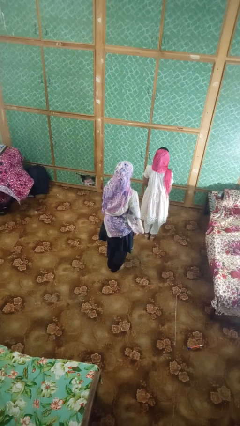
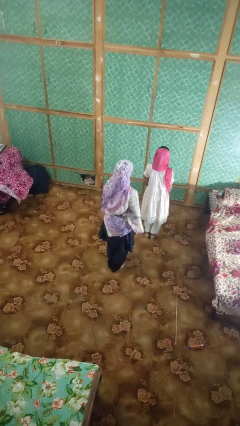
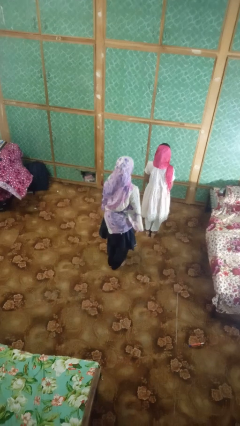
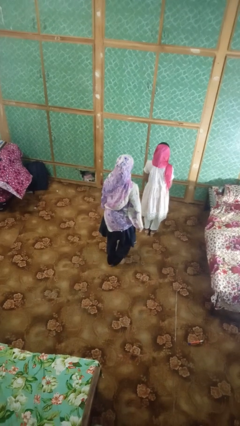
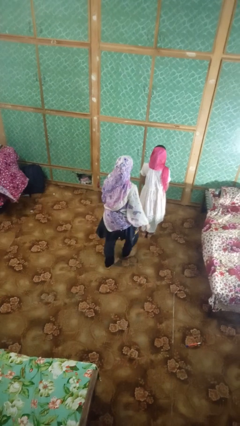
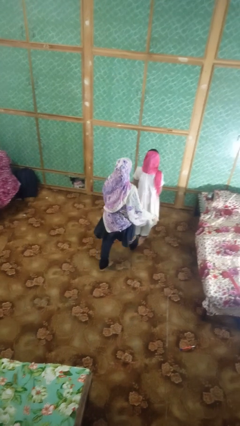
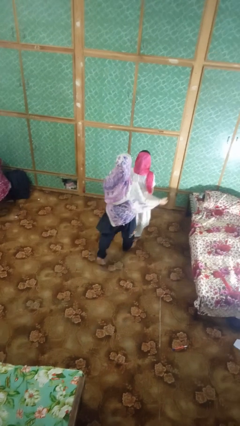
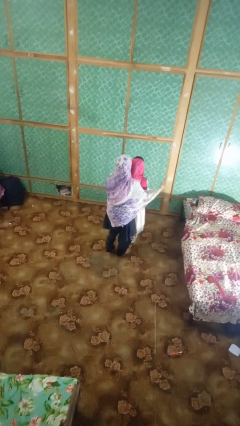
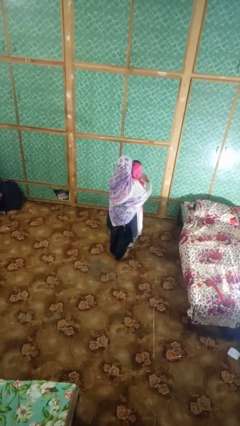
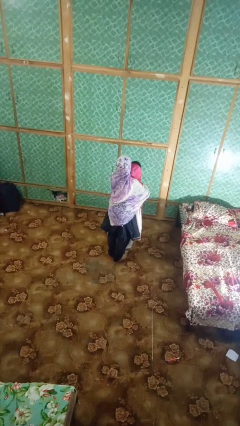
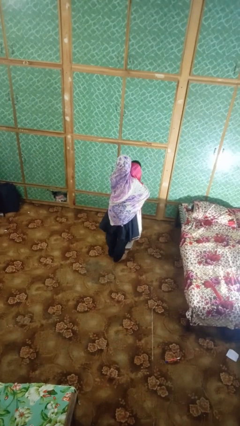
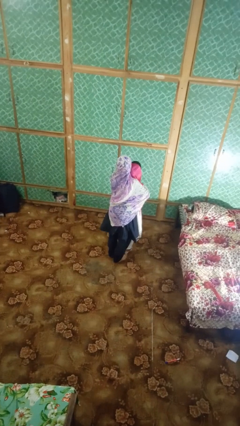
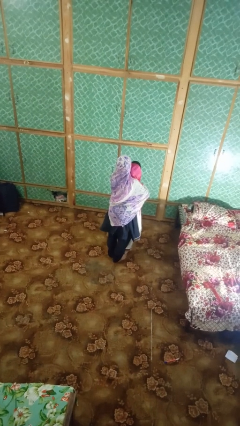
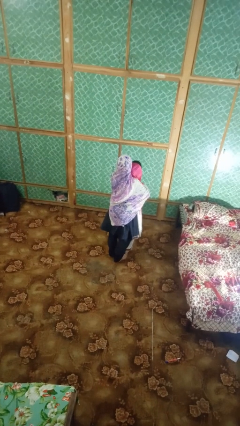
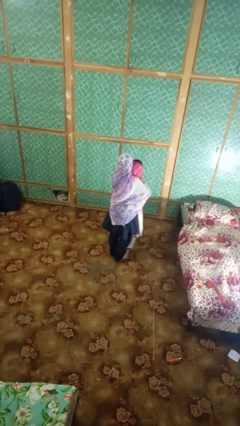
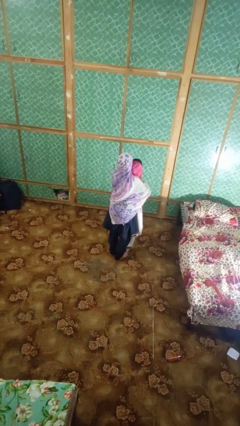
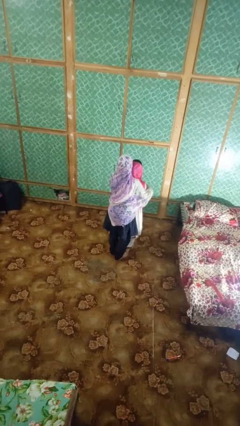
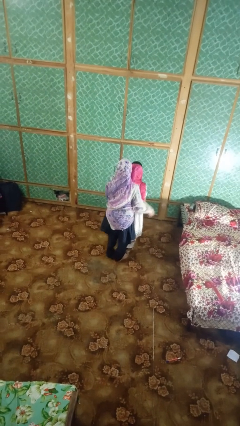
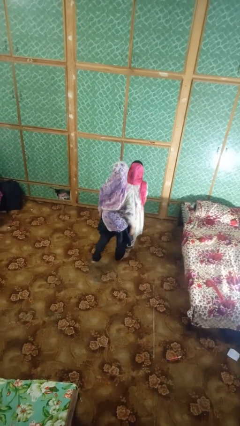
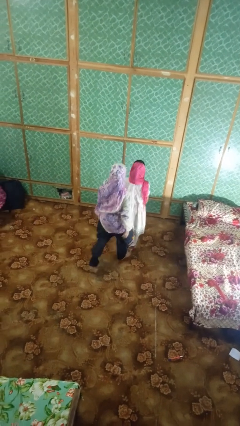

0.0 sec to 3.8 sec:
person hugs person from behind

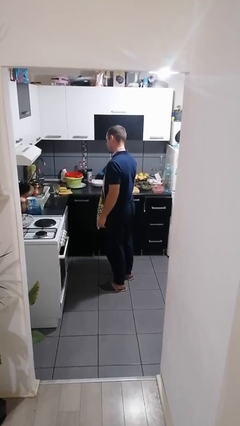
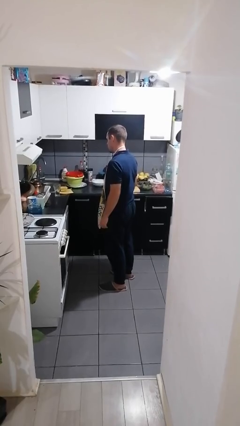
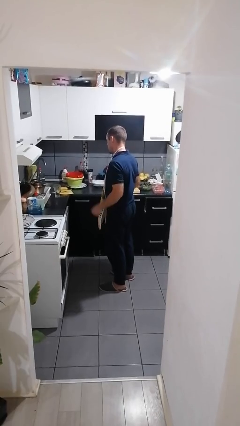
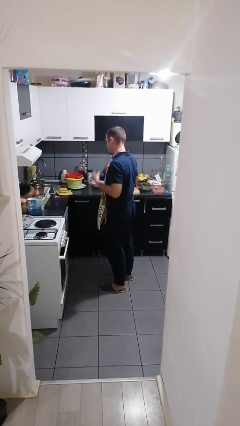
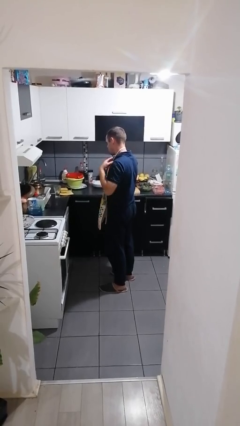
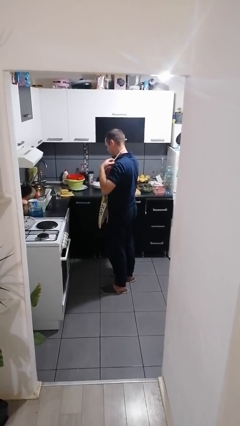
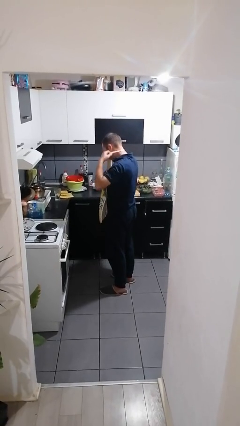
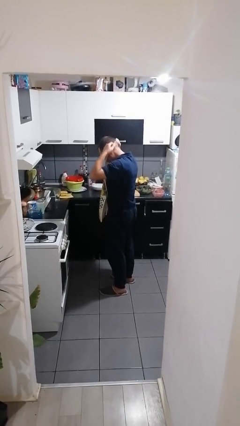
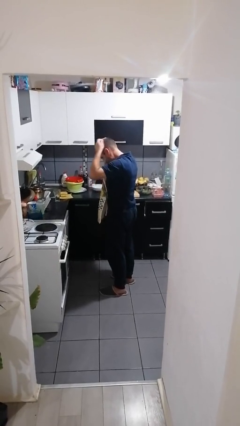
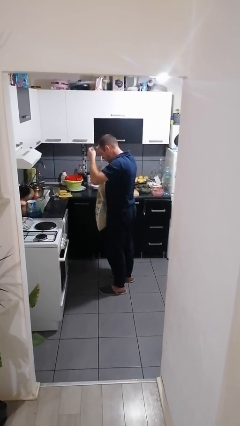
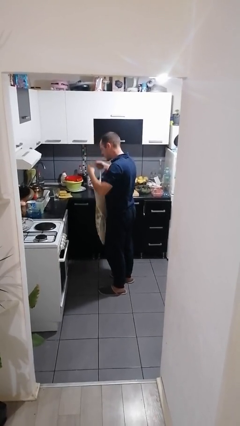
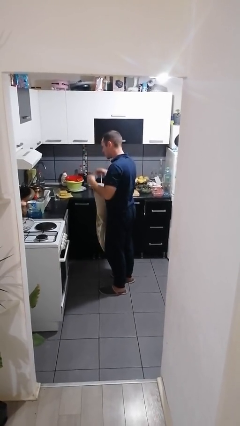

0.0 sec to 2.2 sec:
person takes off apron

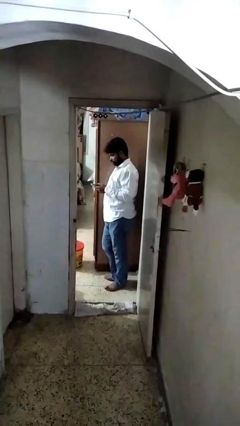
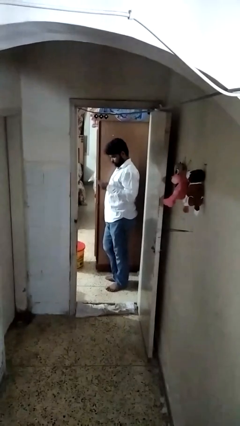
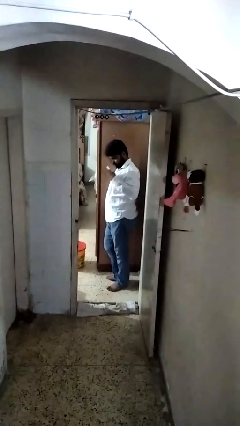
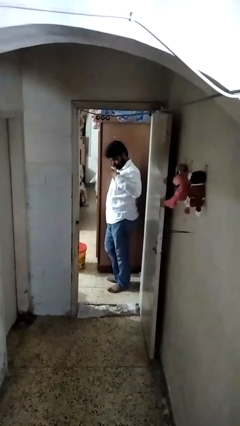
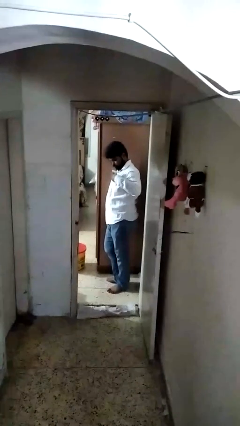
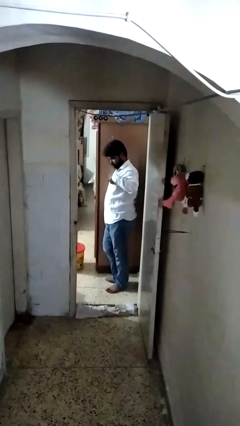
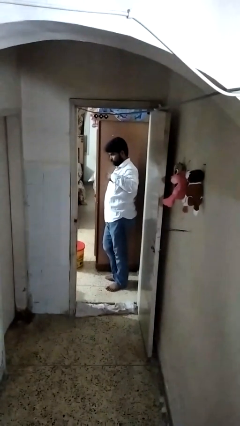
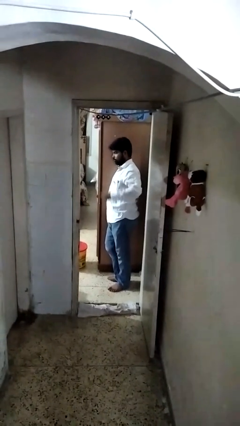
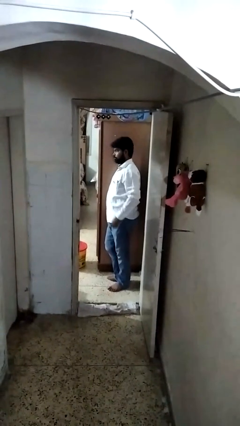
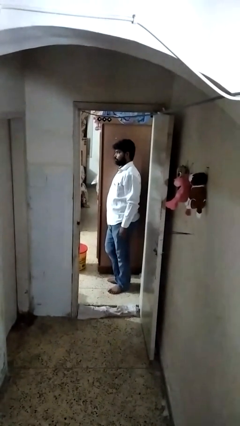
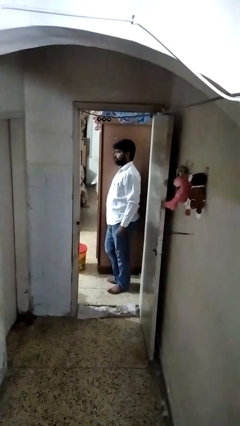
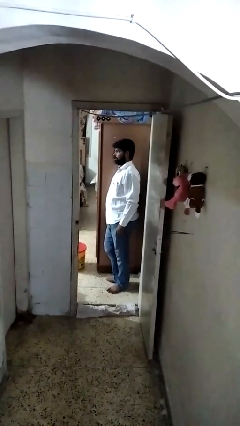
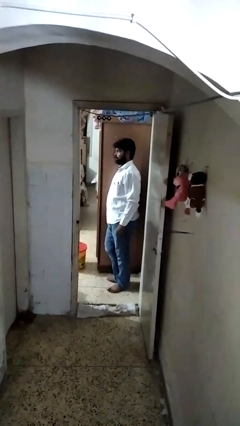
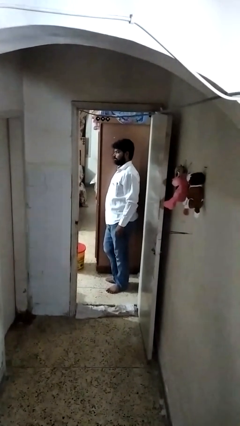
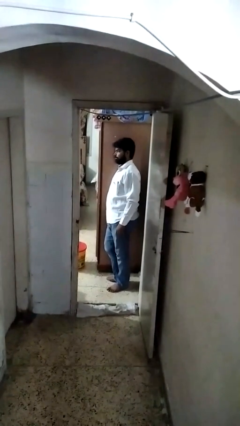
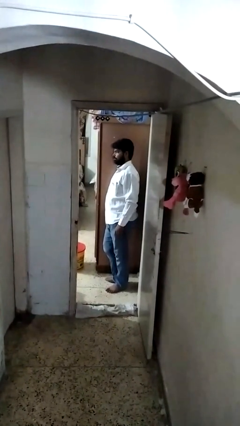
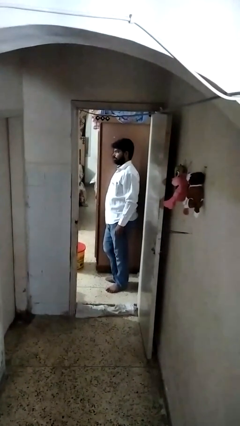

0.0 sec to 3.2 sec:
person puts phone into pocket

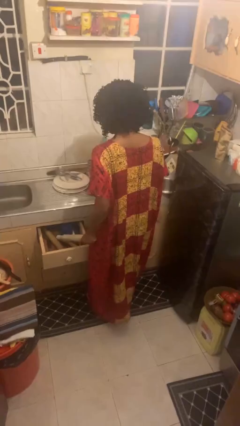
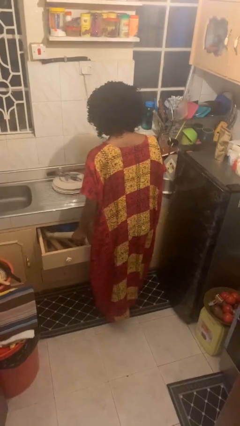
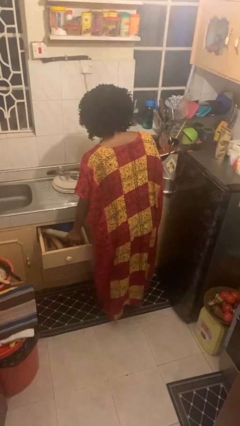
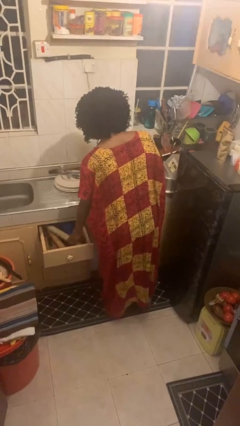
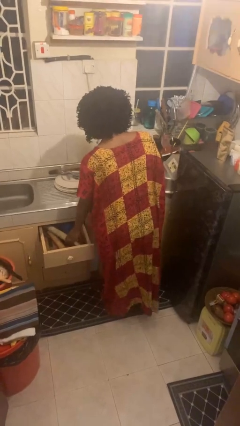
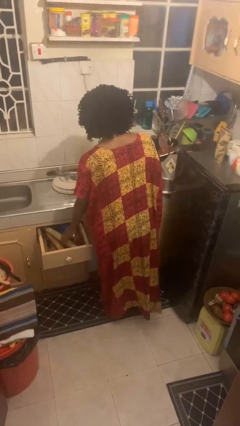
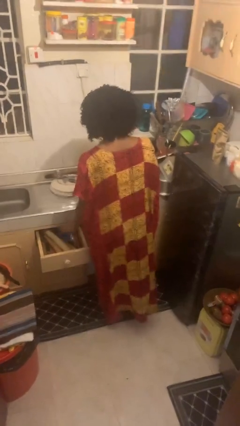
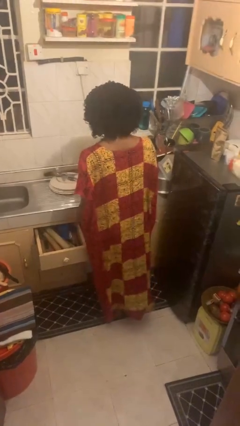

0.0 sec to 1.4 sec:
person puts object into kitchen drawer

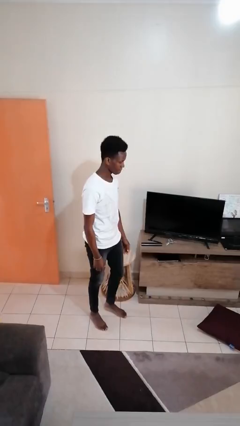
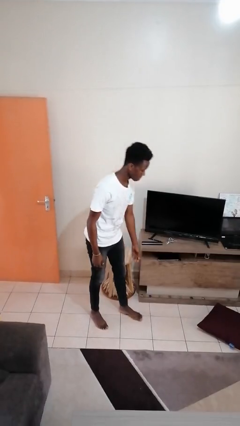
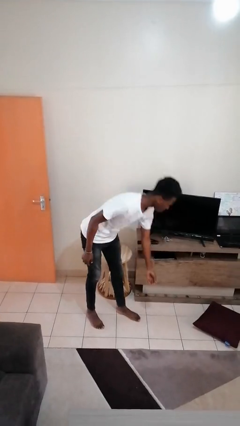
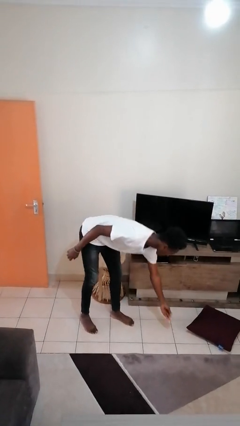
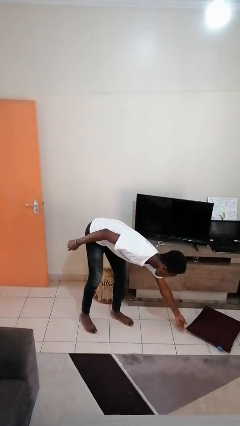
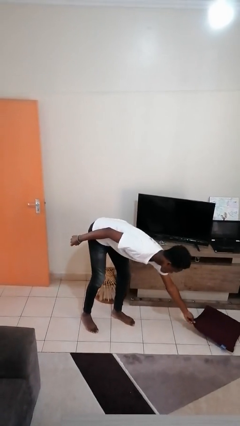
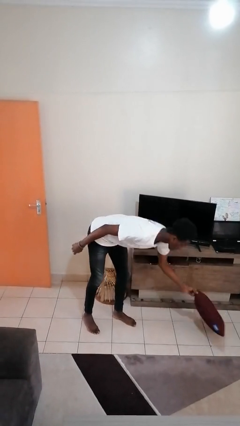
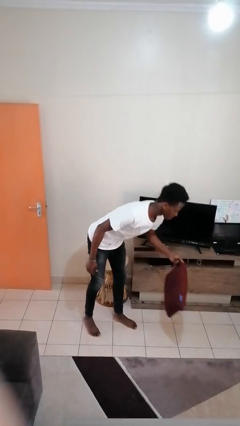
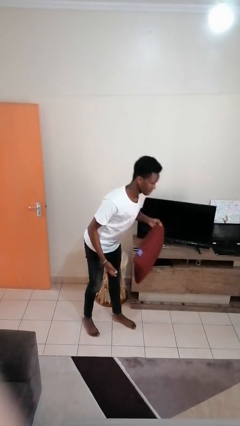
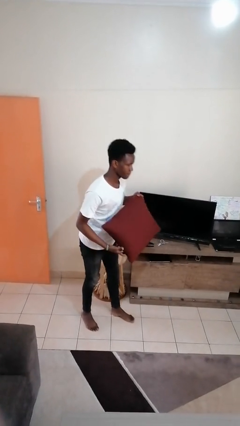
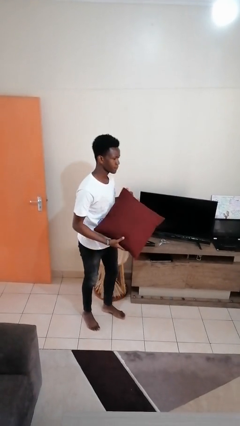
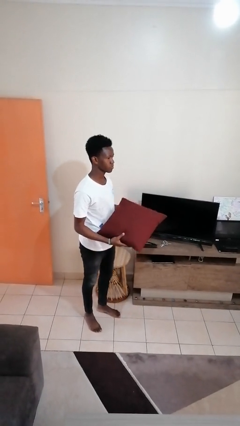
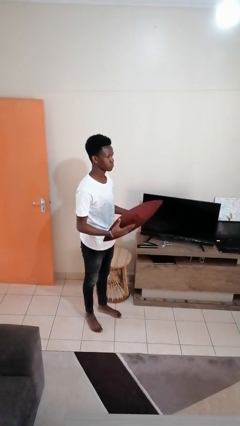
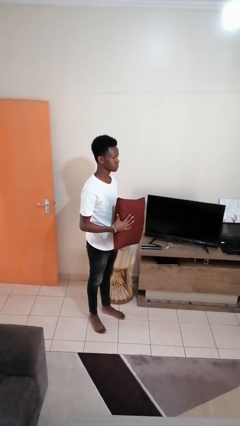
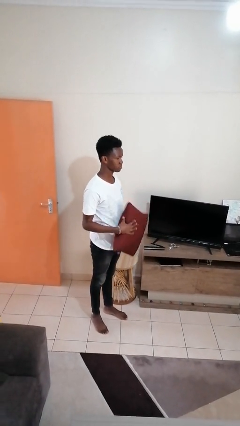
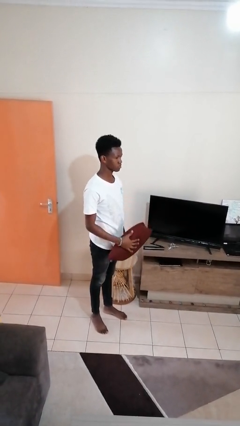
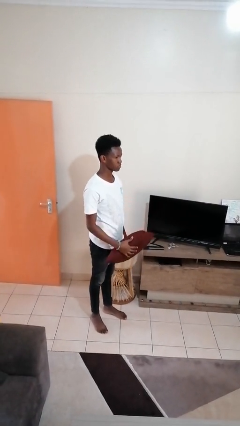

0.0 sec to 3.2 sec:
person picks up object from floor

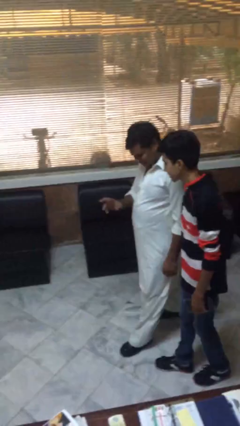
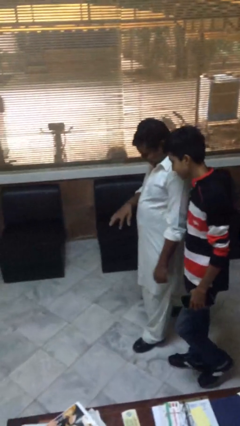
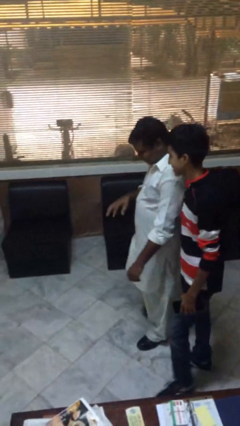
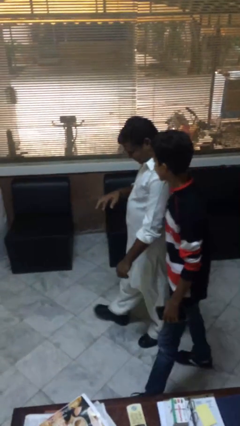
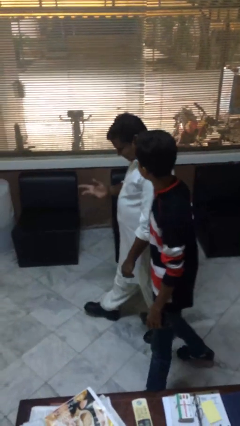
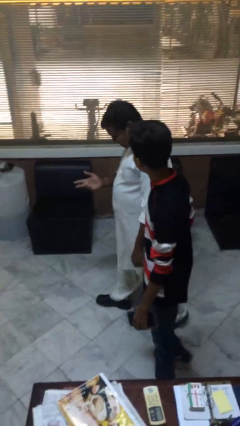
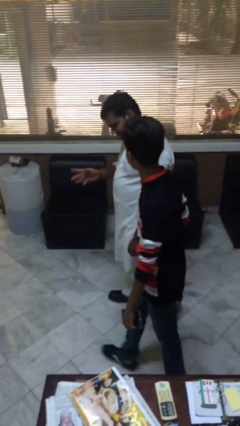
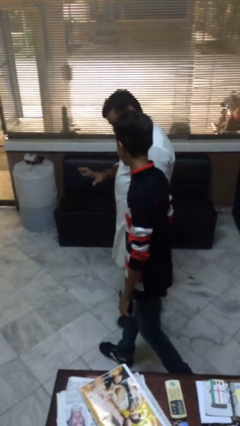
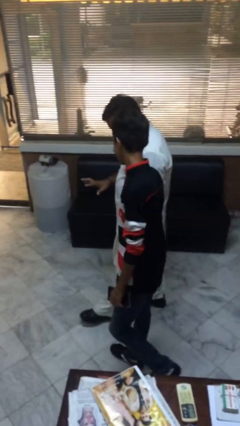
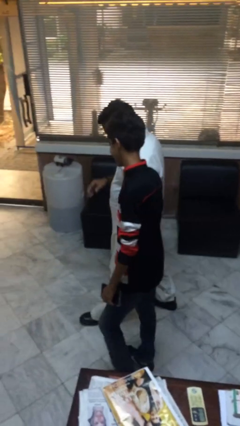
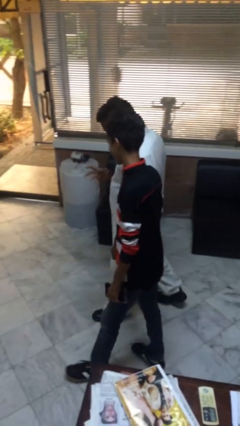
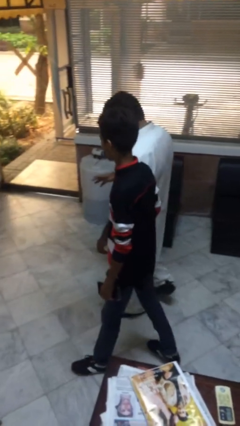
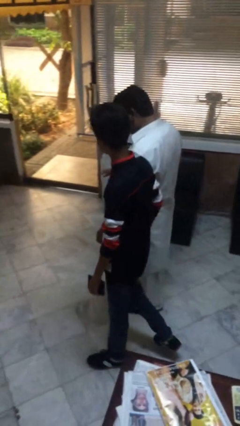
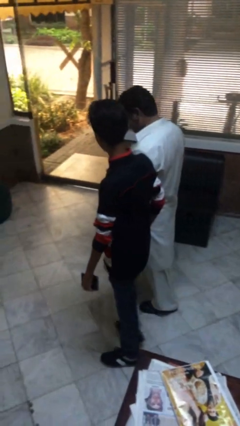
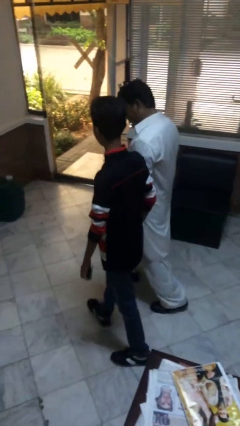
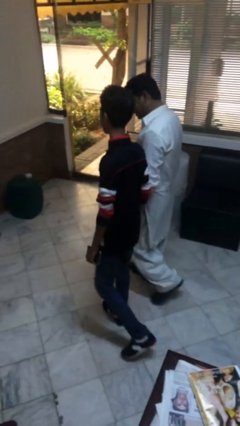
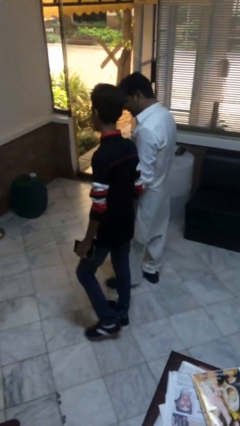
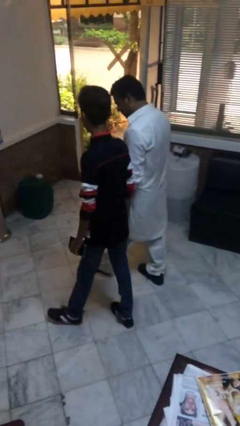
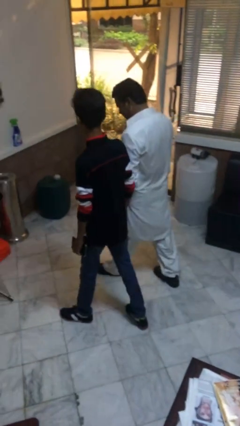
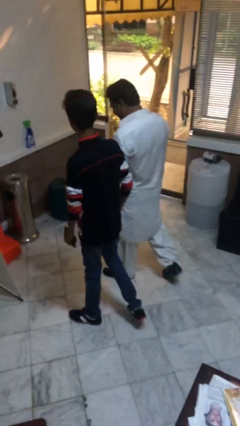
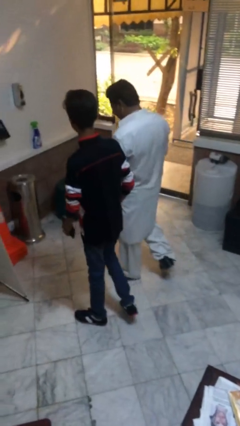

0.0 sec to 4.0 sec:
person talks to person
